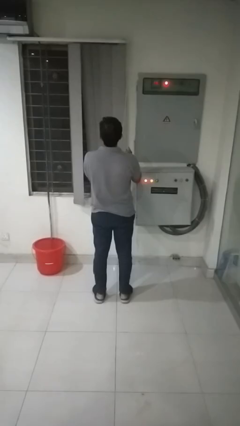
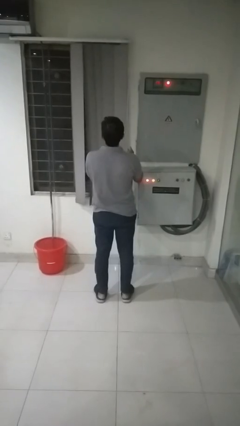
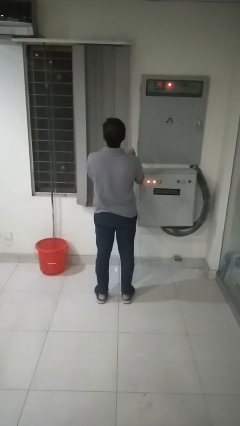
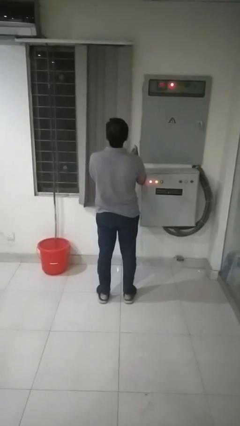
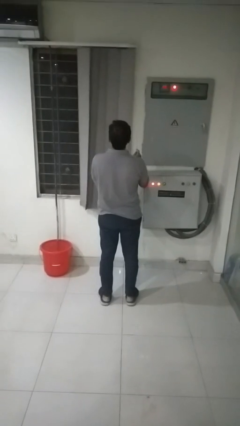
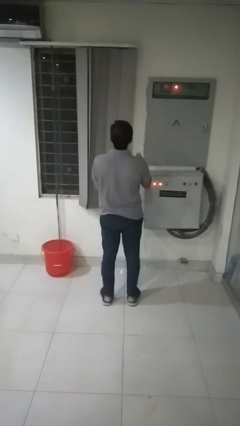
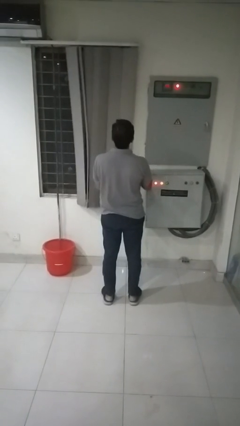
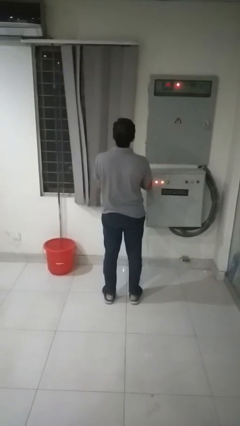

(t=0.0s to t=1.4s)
person closes curtains

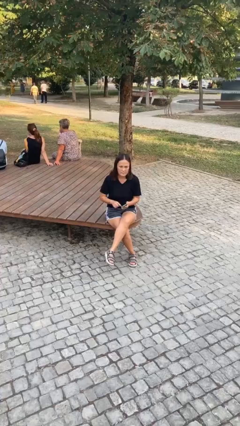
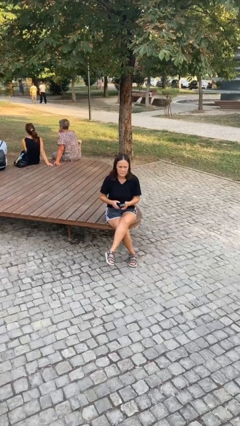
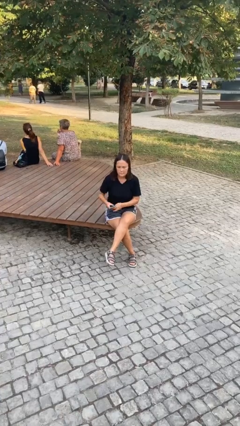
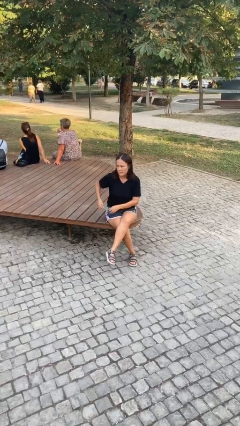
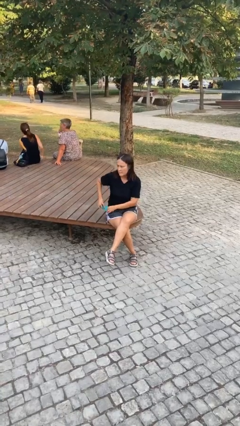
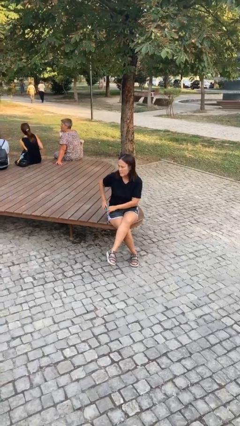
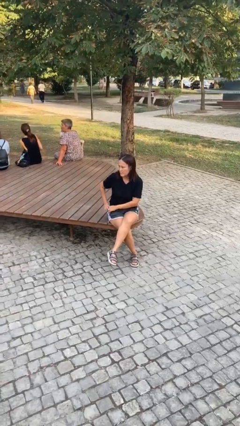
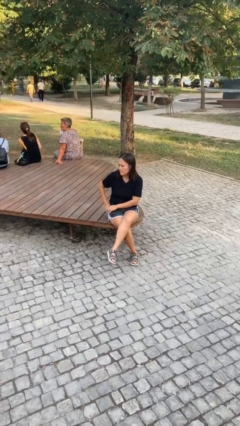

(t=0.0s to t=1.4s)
person puts phone into pocket

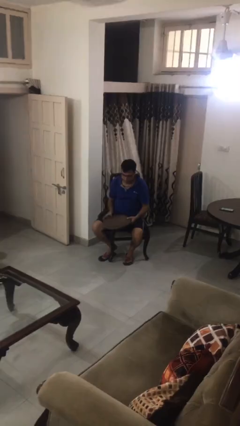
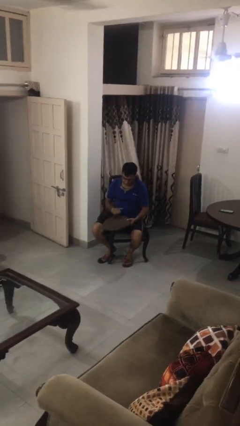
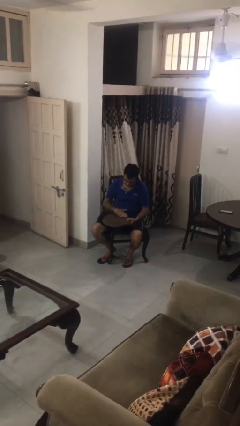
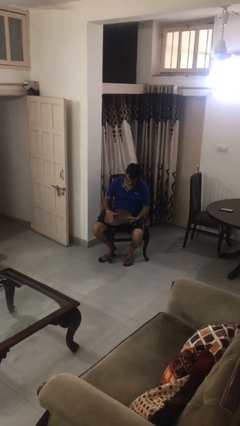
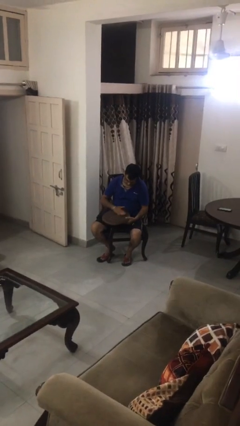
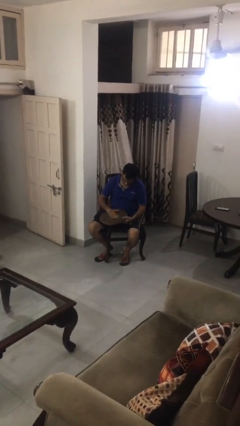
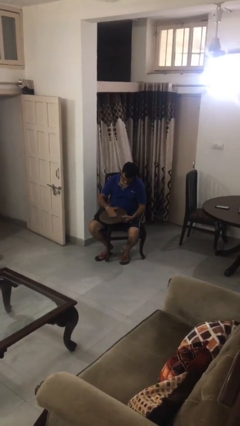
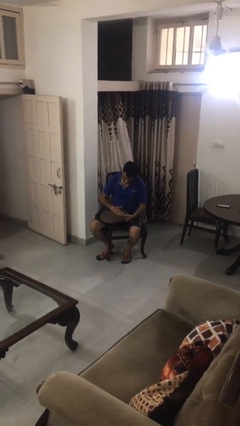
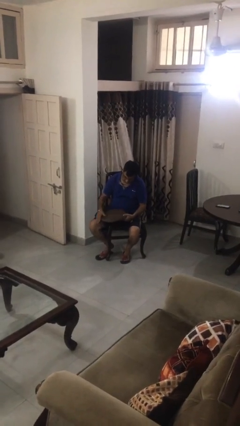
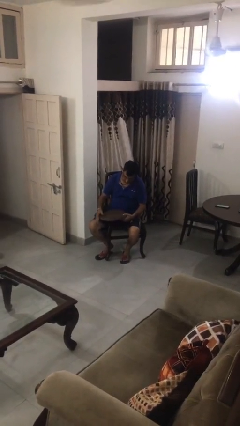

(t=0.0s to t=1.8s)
person waves hand over object

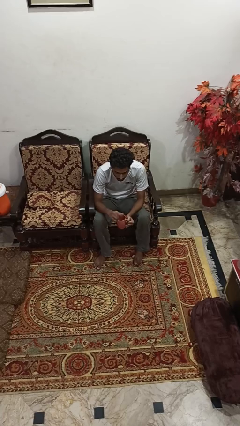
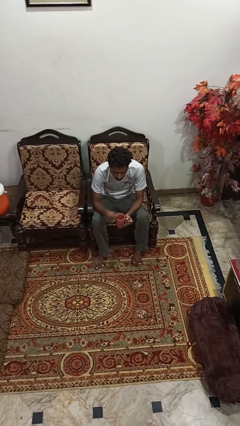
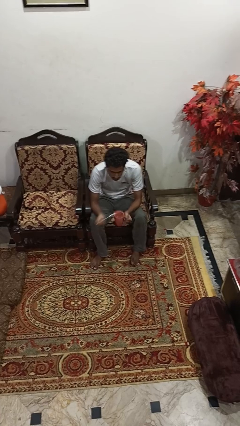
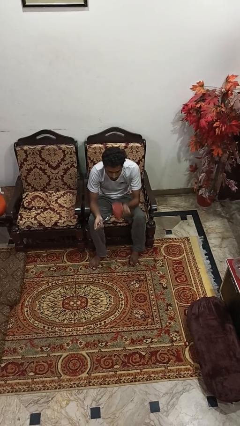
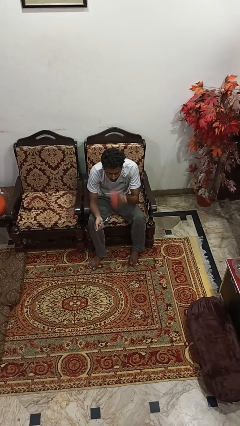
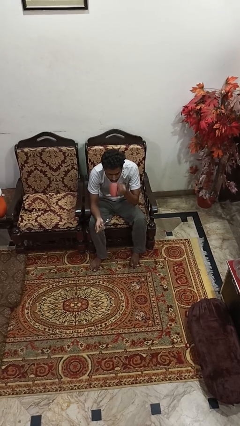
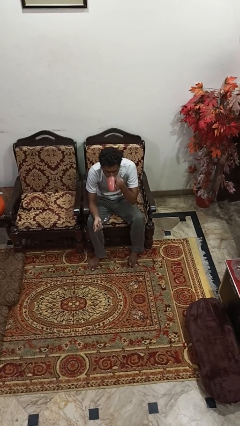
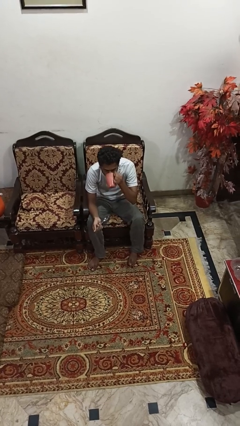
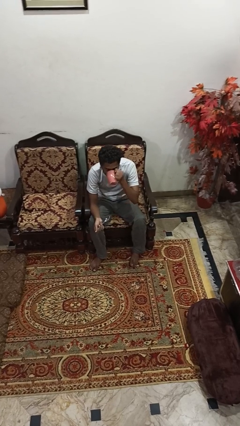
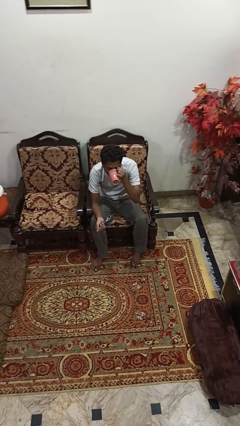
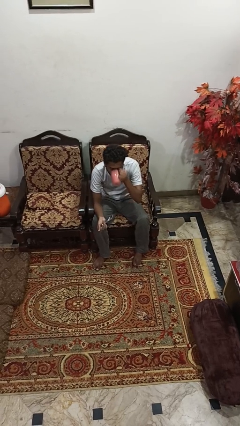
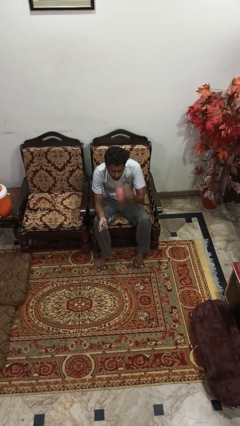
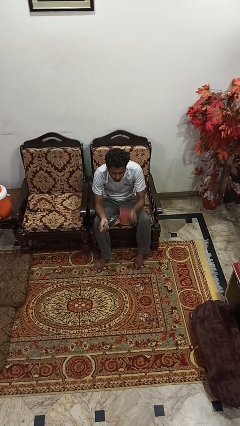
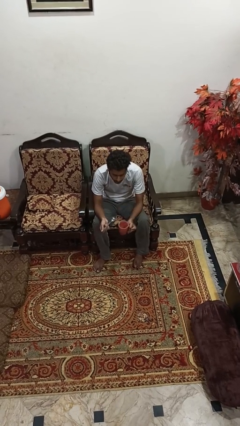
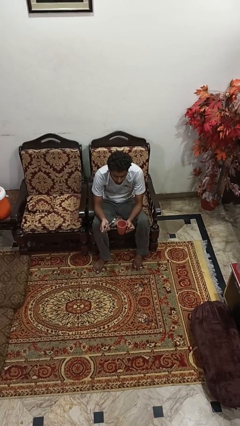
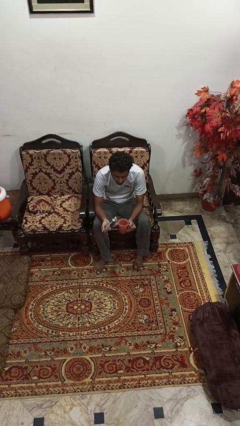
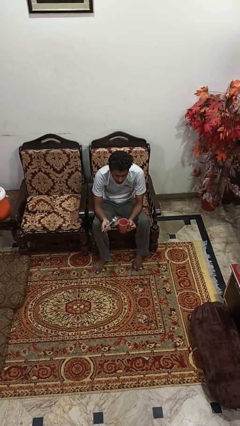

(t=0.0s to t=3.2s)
person drinks from mug

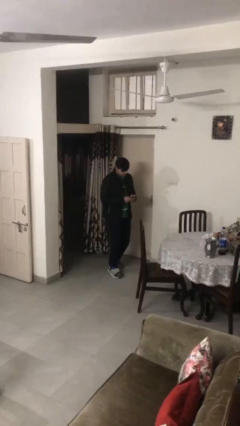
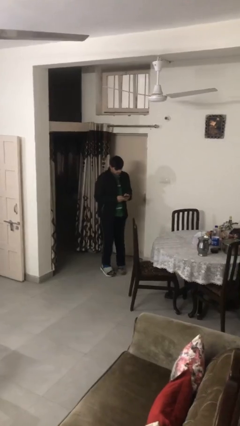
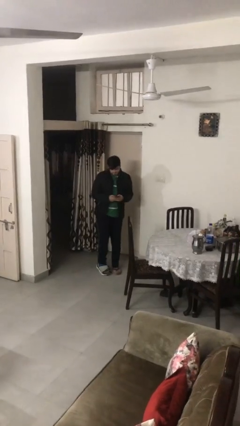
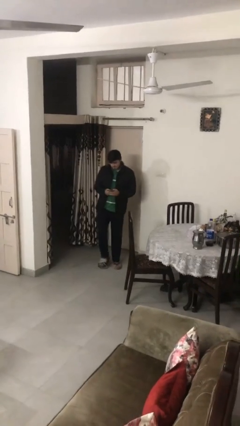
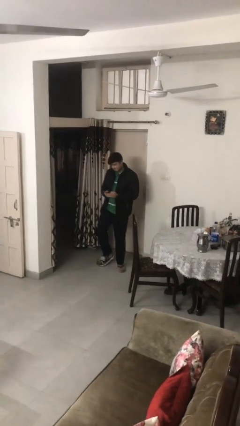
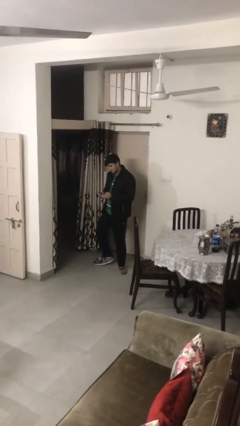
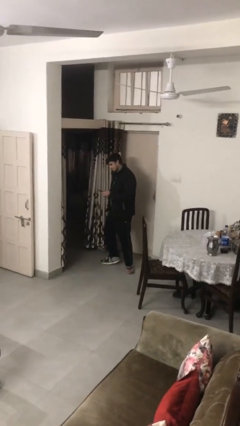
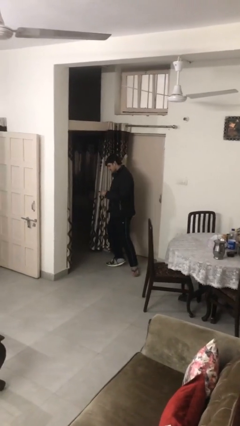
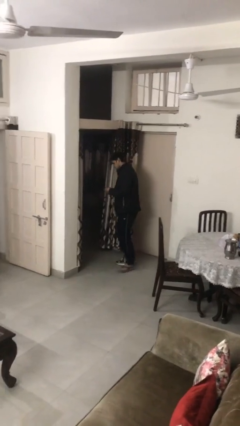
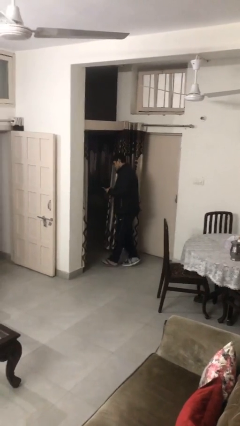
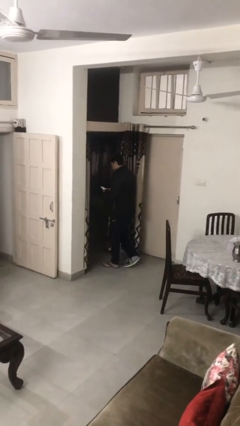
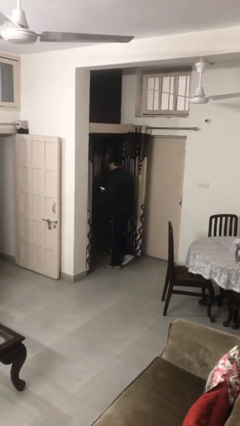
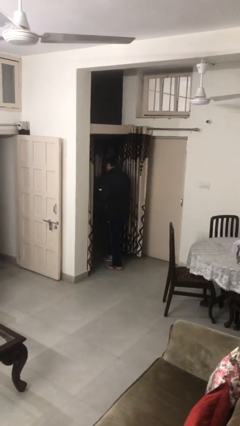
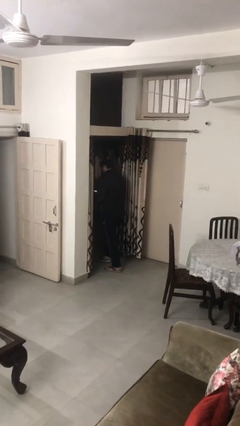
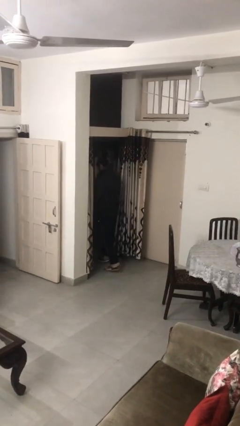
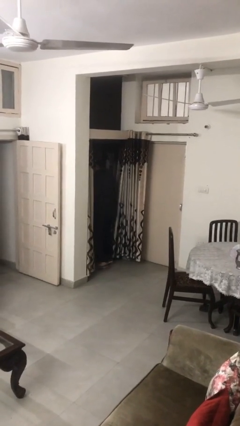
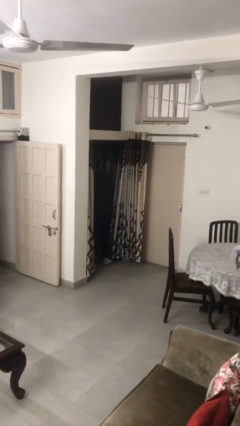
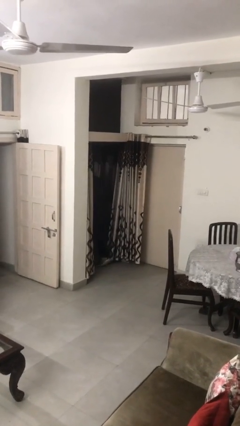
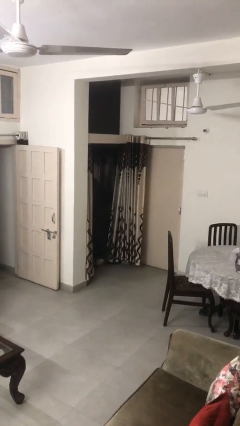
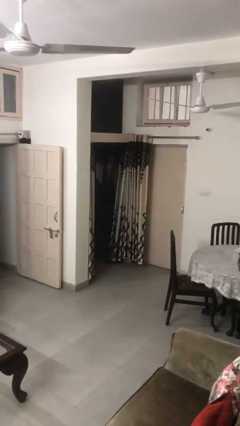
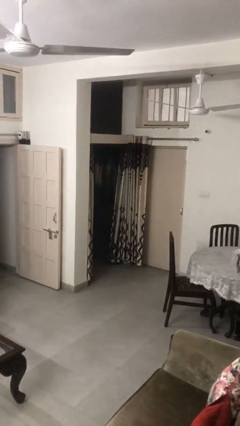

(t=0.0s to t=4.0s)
person exits scene through structure

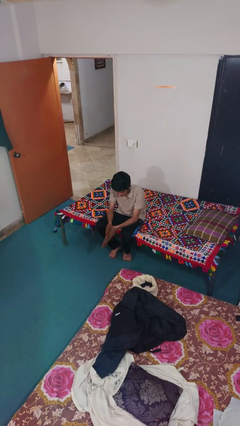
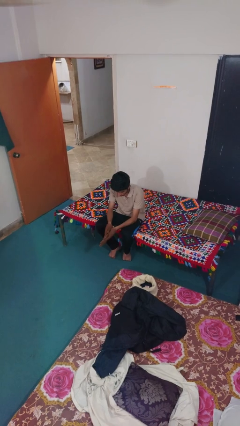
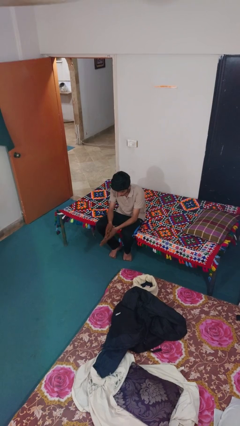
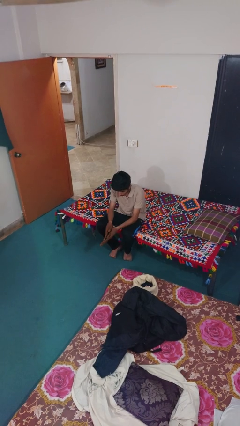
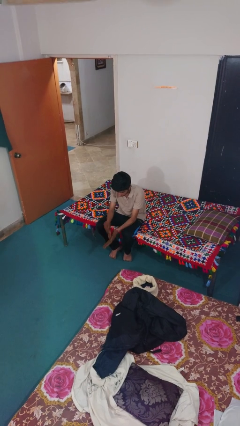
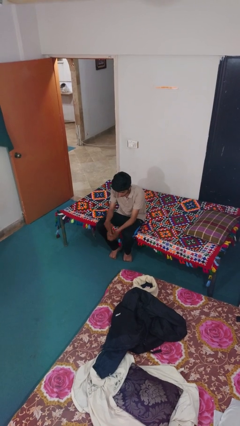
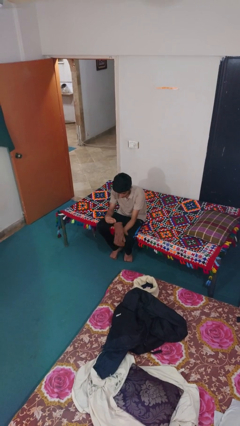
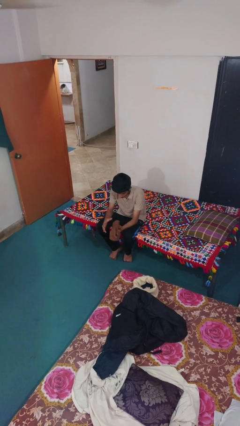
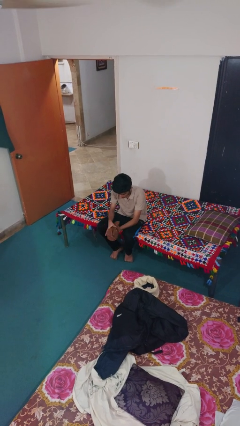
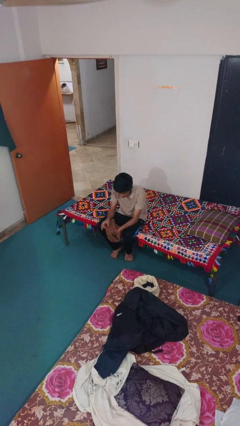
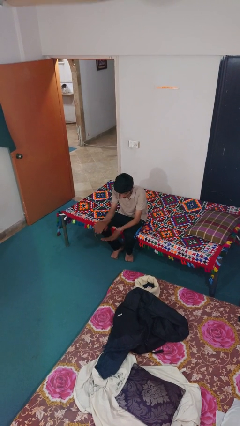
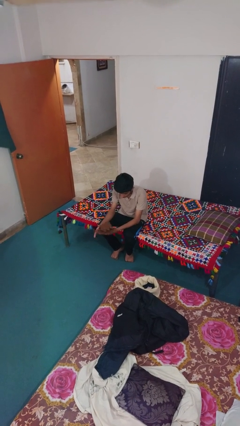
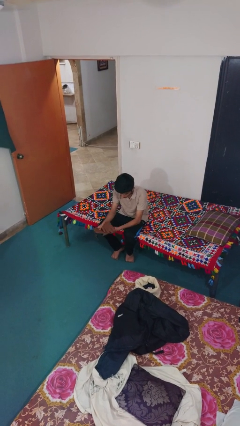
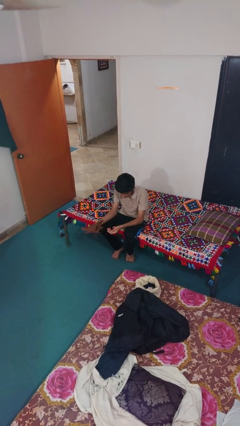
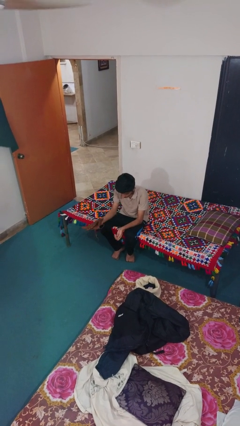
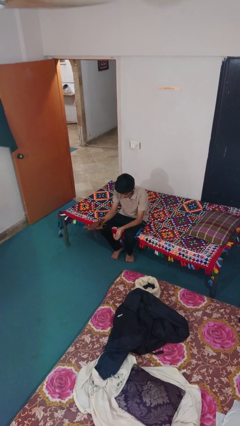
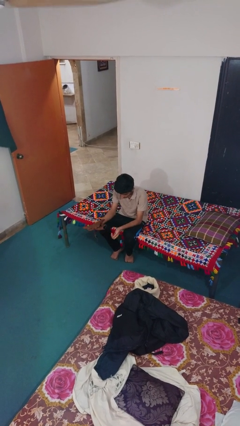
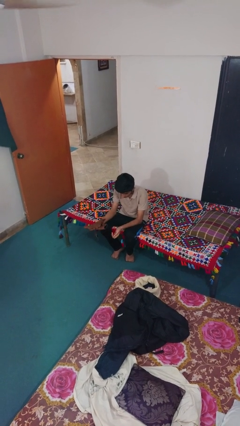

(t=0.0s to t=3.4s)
person takes off gloves

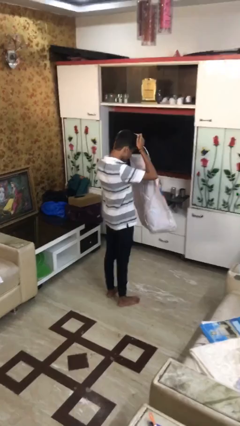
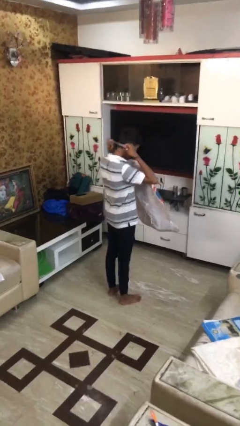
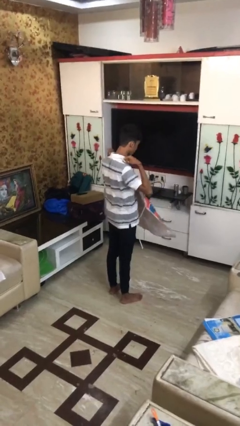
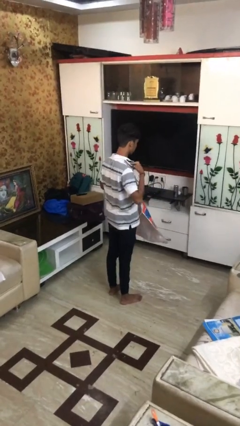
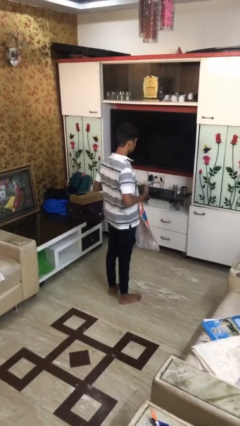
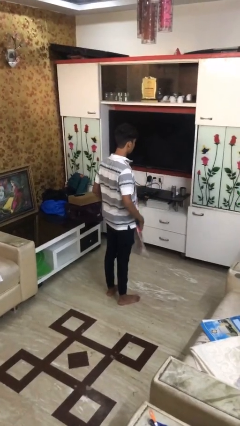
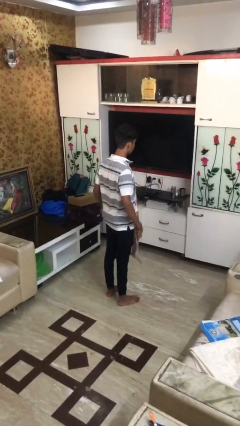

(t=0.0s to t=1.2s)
person puts on apron

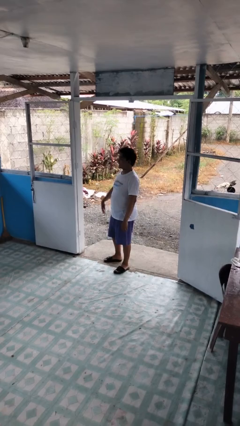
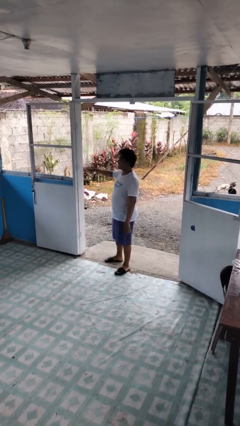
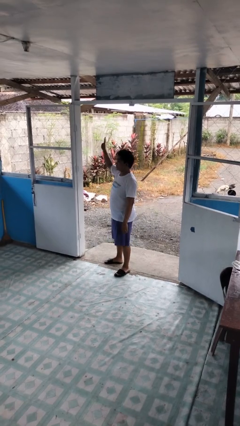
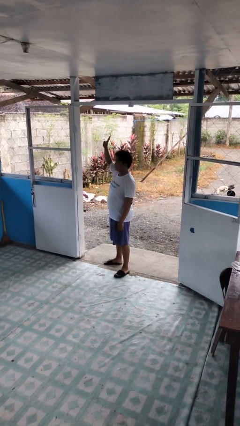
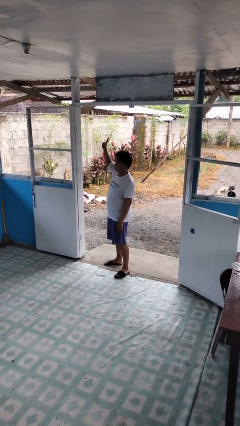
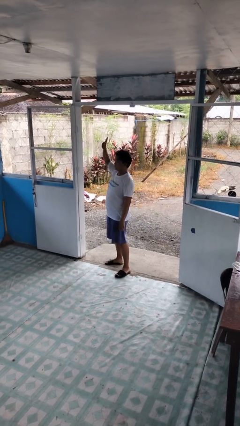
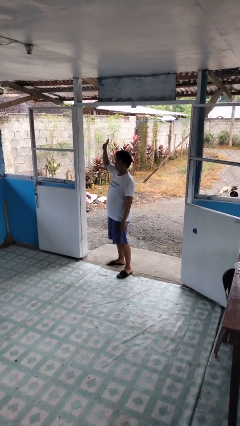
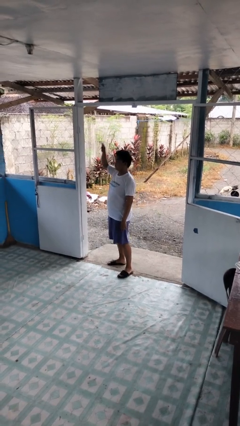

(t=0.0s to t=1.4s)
person gestures number four
